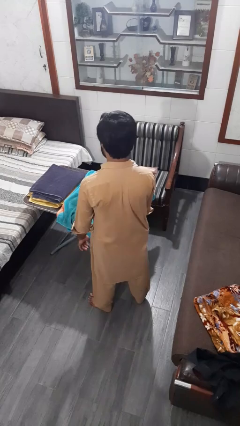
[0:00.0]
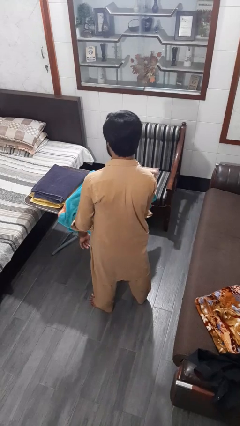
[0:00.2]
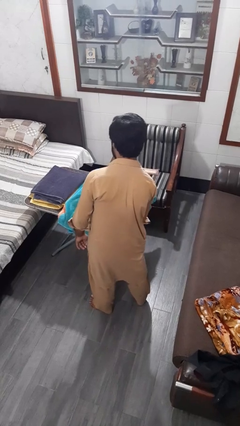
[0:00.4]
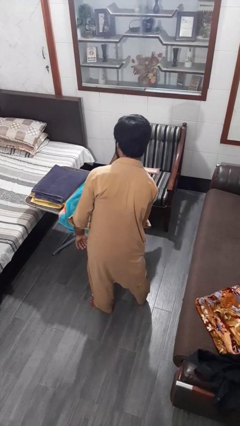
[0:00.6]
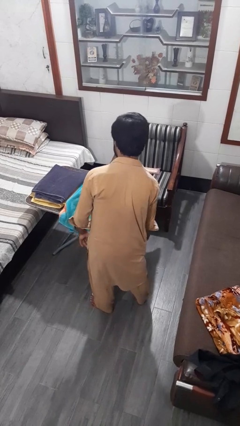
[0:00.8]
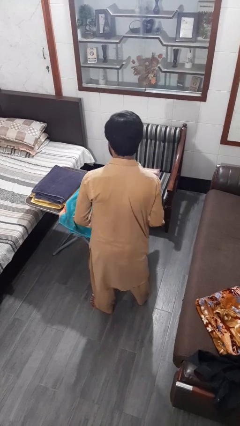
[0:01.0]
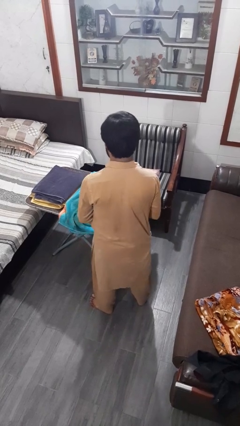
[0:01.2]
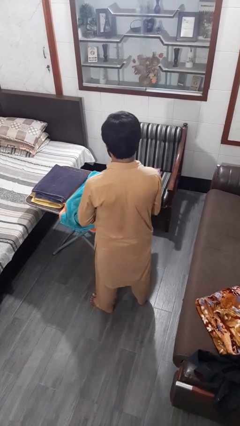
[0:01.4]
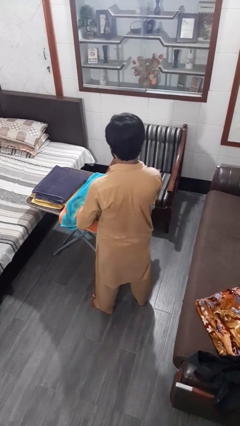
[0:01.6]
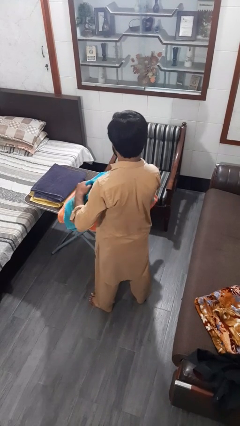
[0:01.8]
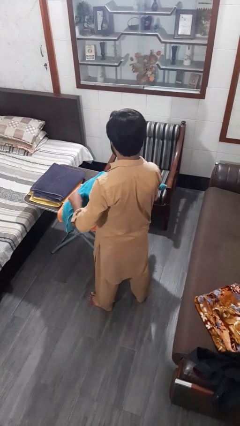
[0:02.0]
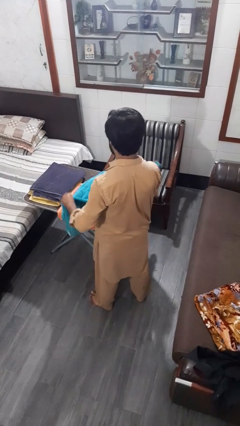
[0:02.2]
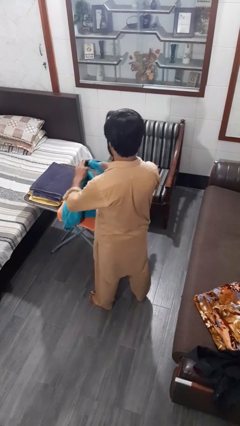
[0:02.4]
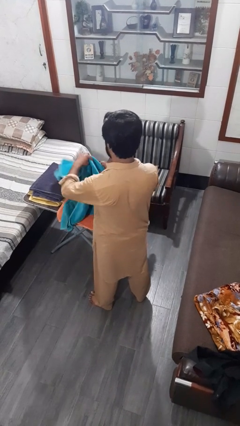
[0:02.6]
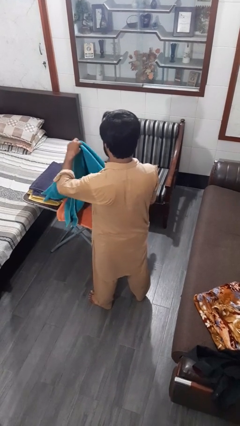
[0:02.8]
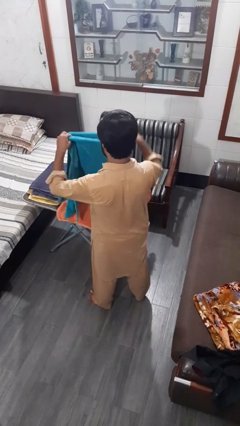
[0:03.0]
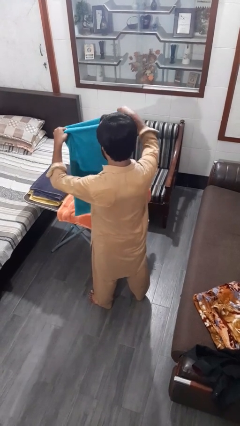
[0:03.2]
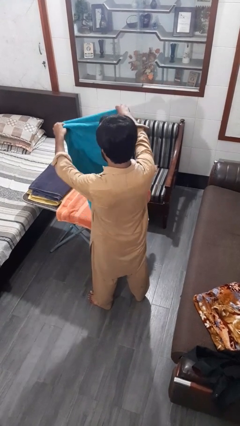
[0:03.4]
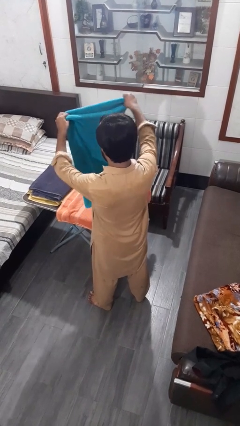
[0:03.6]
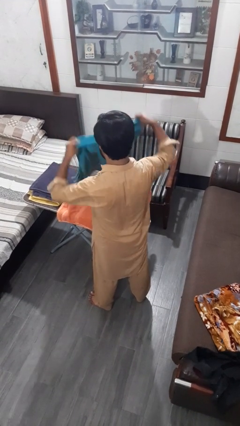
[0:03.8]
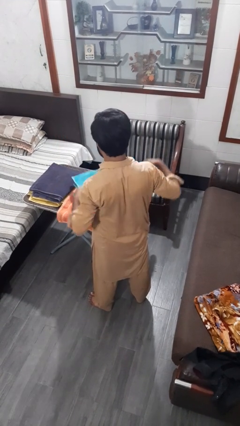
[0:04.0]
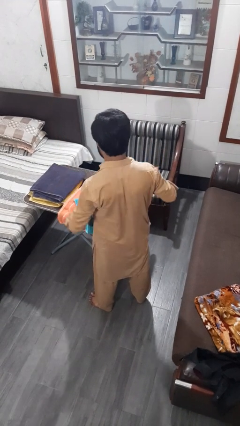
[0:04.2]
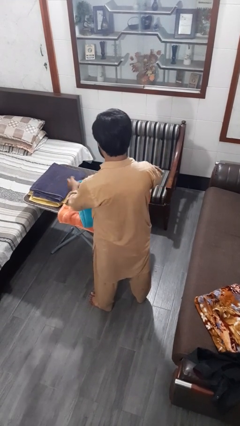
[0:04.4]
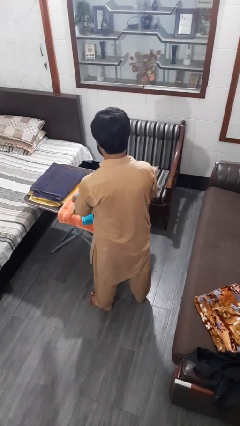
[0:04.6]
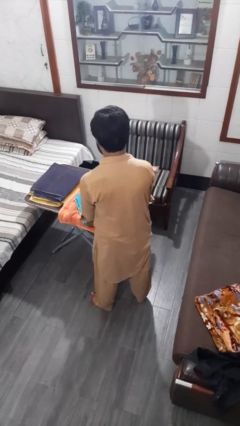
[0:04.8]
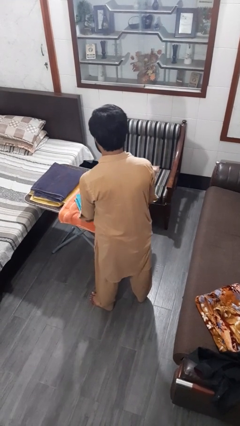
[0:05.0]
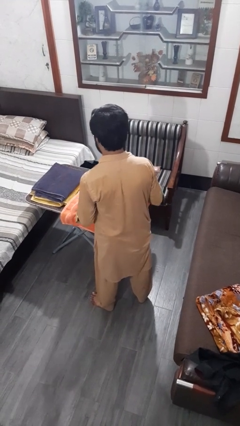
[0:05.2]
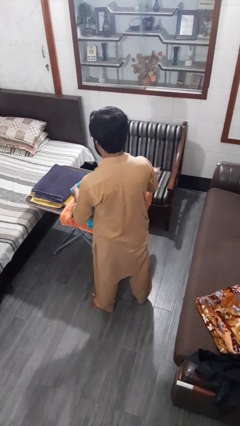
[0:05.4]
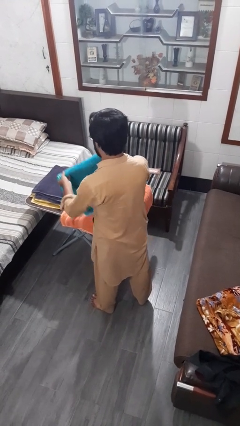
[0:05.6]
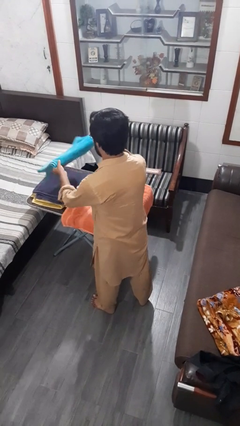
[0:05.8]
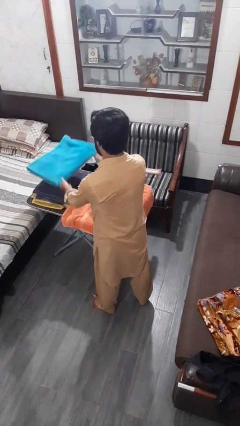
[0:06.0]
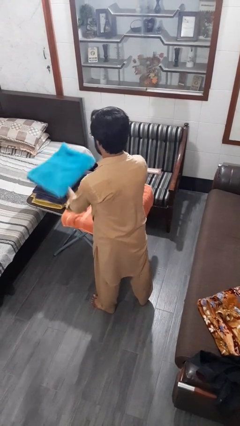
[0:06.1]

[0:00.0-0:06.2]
person folds towel

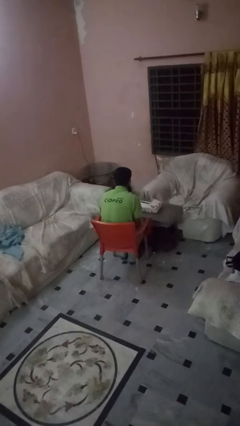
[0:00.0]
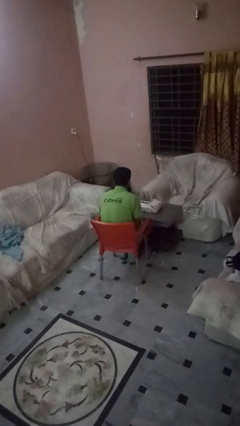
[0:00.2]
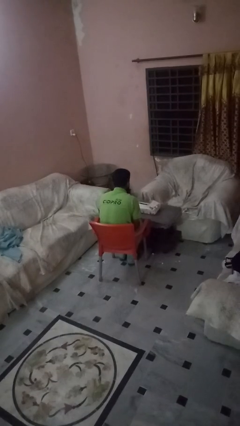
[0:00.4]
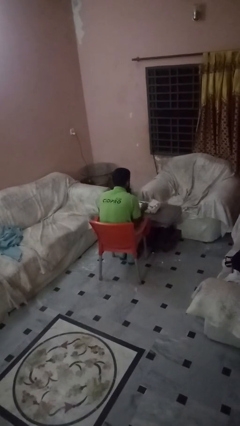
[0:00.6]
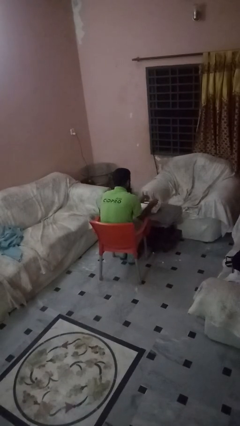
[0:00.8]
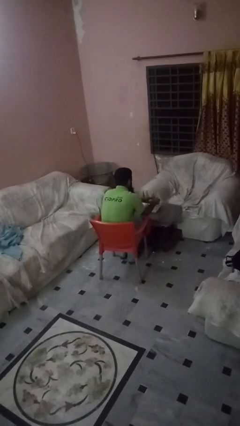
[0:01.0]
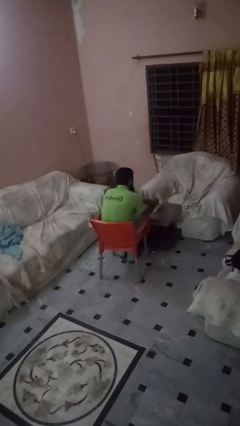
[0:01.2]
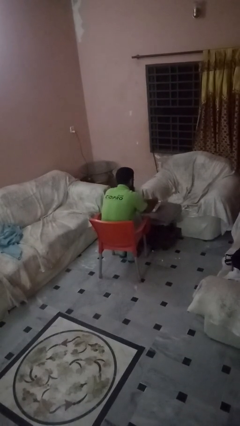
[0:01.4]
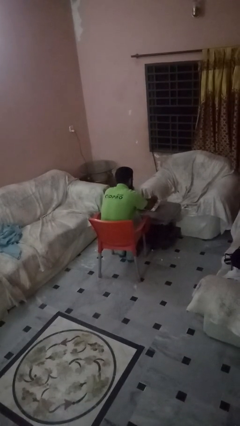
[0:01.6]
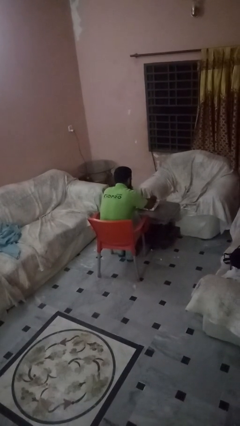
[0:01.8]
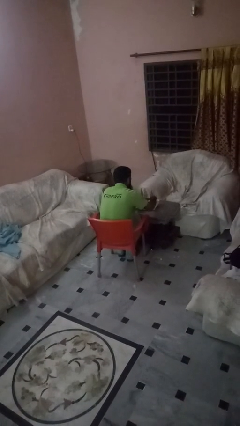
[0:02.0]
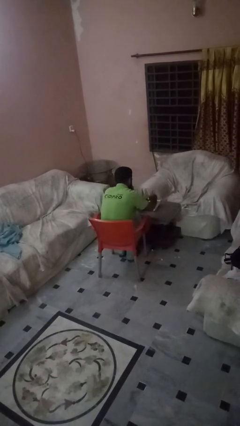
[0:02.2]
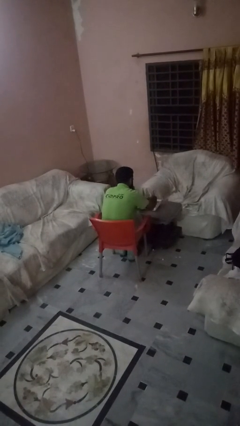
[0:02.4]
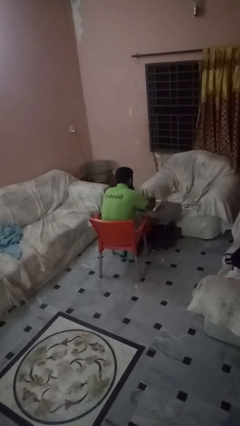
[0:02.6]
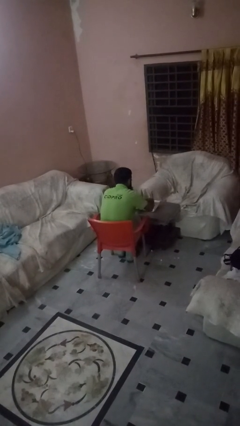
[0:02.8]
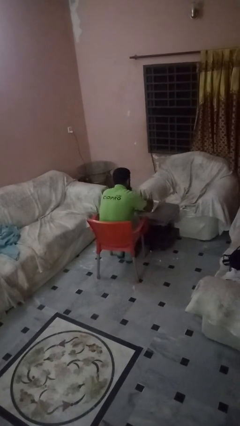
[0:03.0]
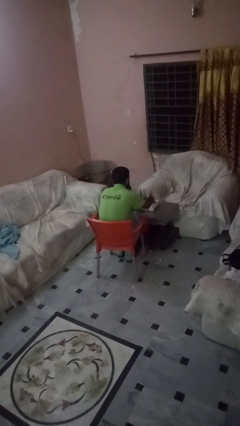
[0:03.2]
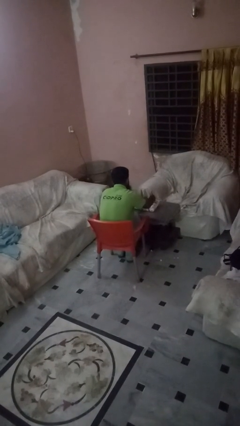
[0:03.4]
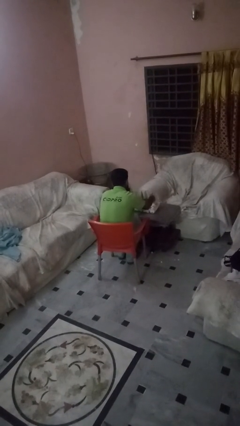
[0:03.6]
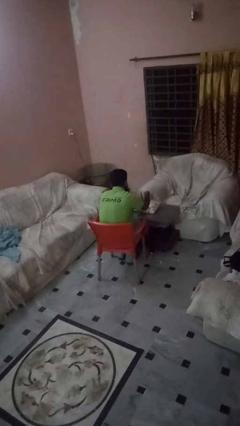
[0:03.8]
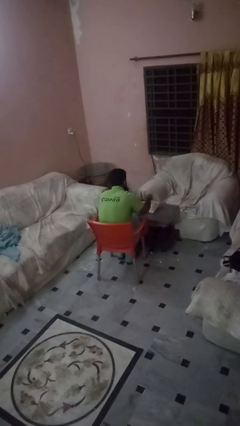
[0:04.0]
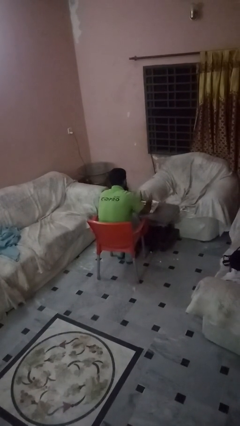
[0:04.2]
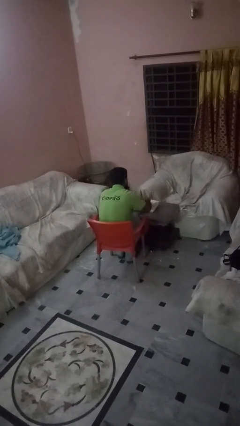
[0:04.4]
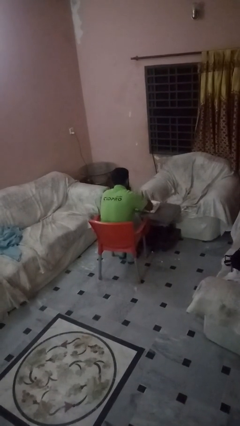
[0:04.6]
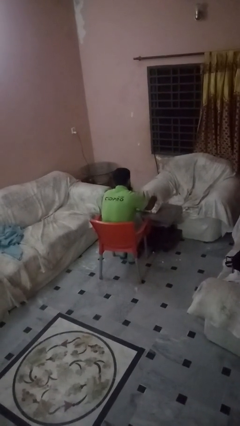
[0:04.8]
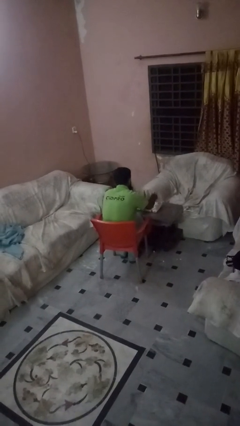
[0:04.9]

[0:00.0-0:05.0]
person wraps box

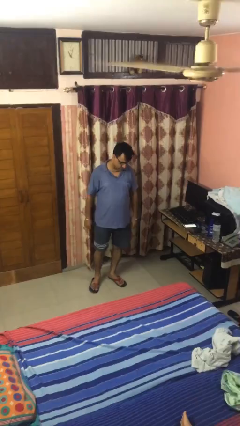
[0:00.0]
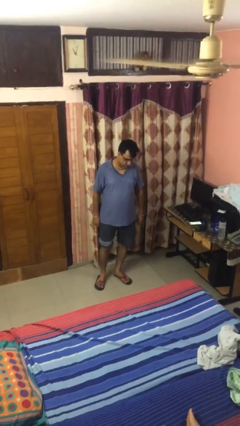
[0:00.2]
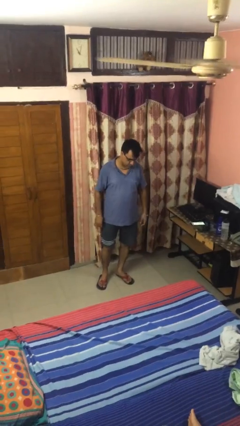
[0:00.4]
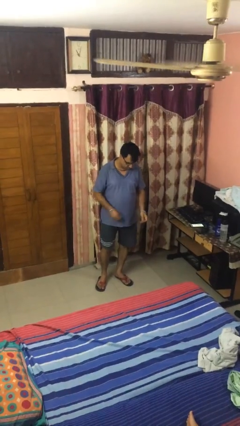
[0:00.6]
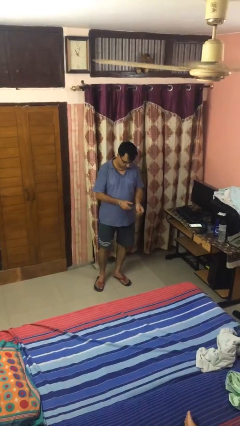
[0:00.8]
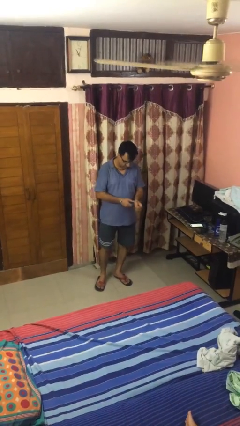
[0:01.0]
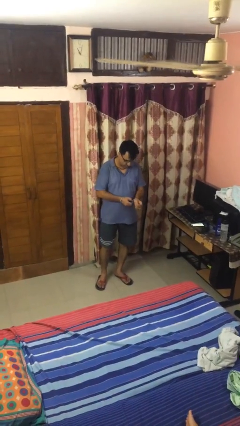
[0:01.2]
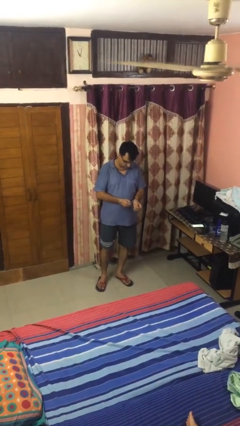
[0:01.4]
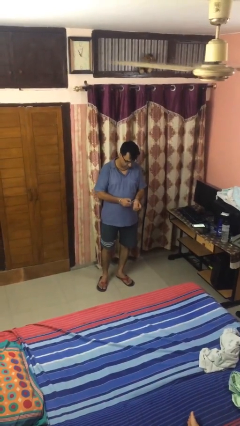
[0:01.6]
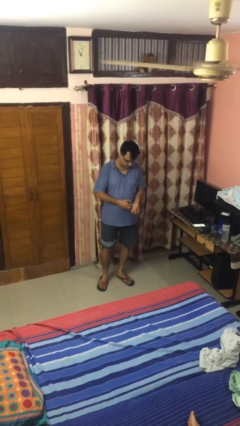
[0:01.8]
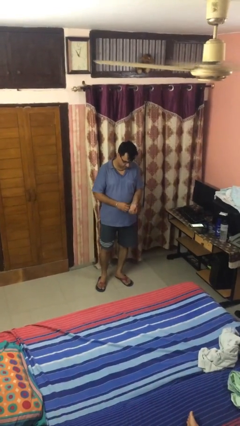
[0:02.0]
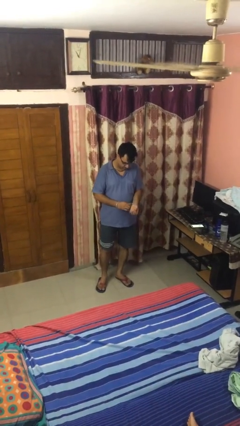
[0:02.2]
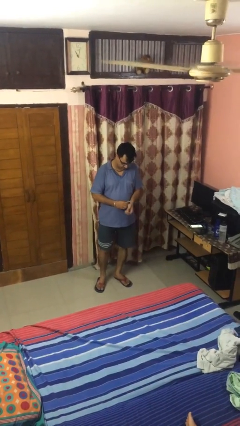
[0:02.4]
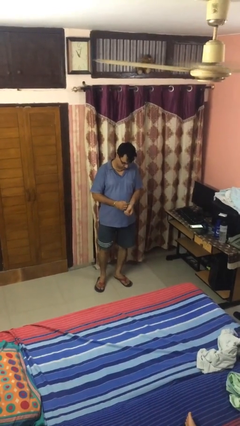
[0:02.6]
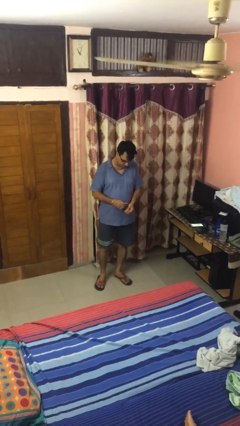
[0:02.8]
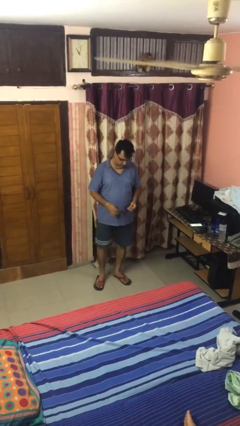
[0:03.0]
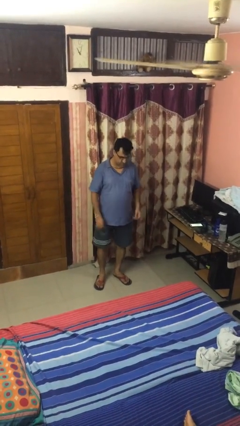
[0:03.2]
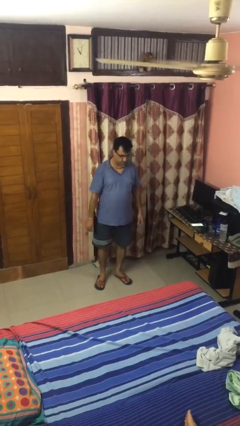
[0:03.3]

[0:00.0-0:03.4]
person takes off wristwatch

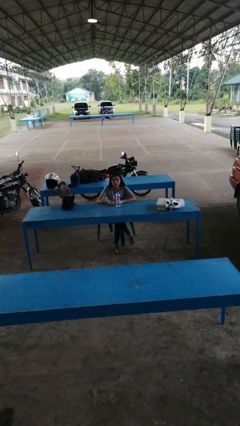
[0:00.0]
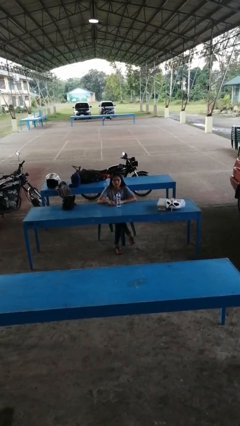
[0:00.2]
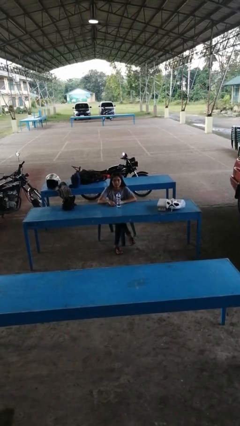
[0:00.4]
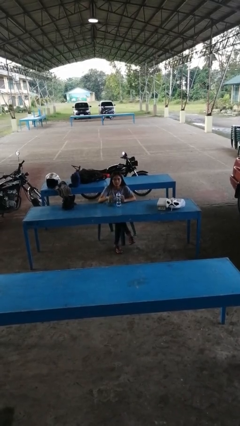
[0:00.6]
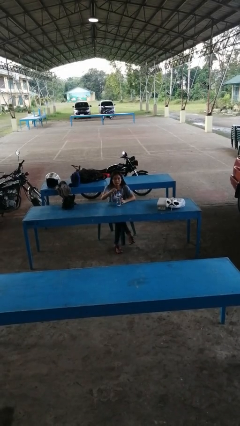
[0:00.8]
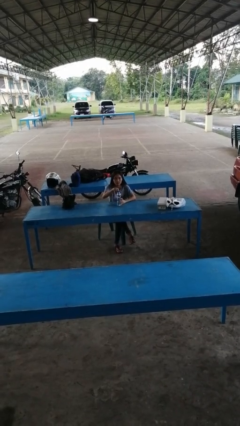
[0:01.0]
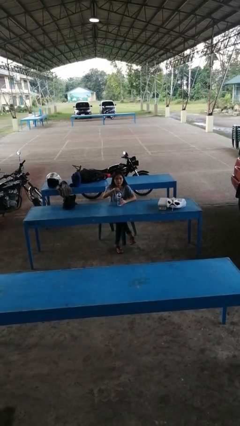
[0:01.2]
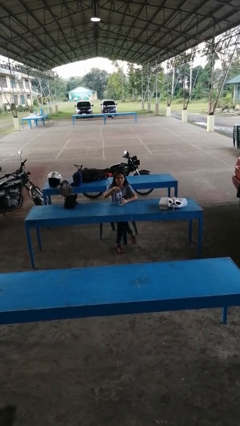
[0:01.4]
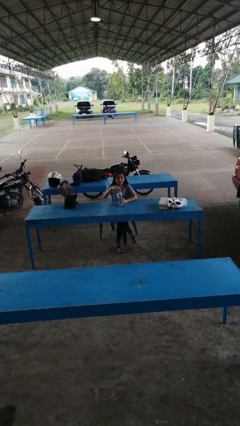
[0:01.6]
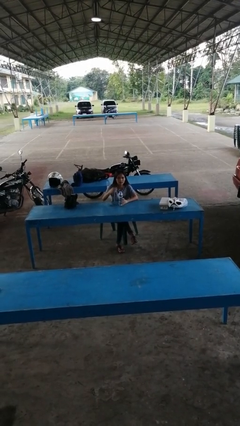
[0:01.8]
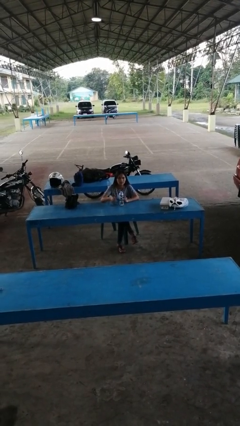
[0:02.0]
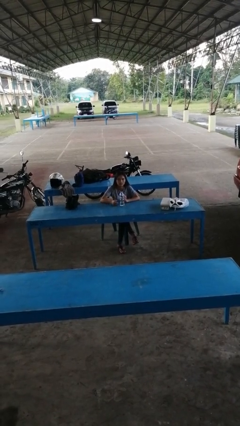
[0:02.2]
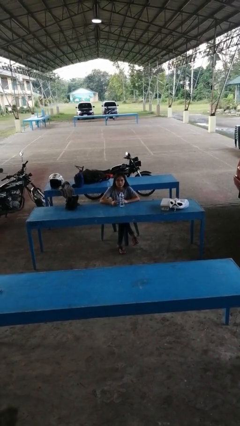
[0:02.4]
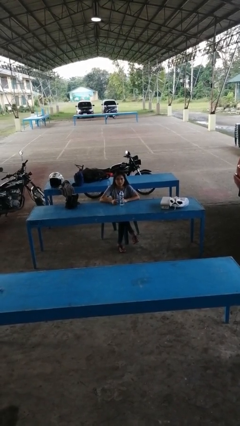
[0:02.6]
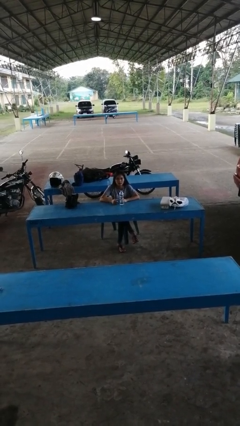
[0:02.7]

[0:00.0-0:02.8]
person unscrews lid from bottle

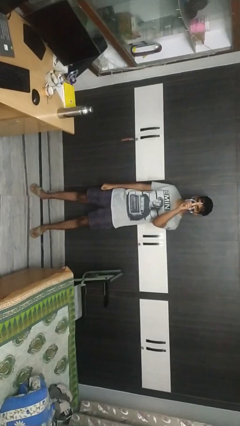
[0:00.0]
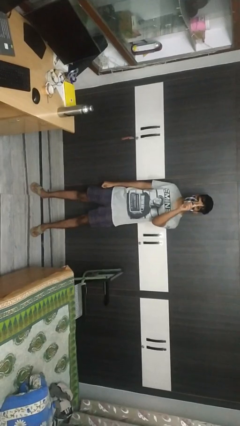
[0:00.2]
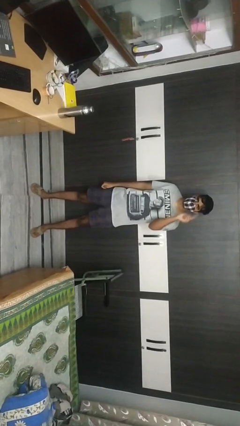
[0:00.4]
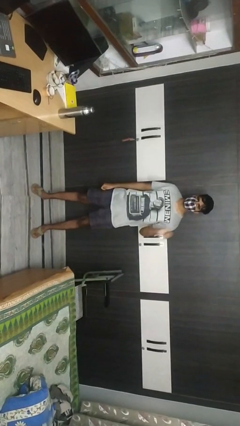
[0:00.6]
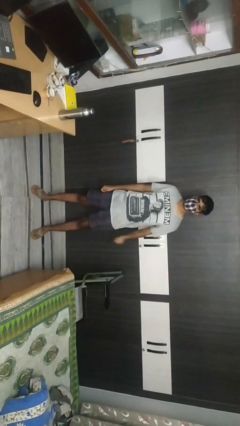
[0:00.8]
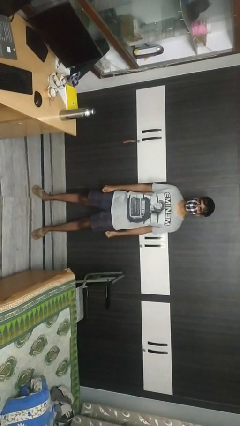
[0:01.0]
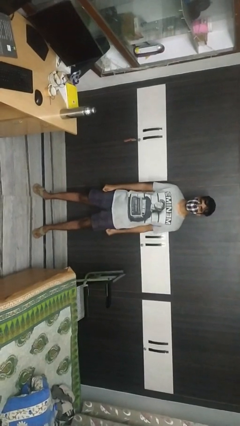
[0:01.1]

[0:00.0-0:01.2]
person gestures number one
